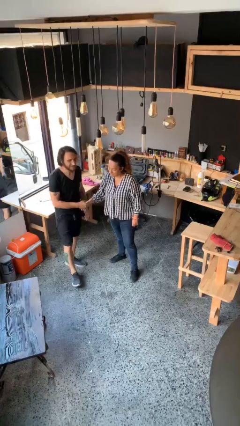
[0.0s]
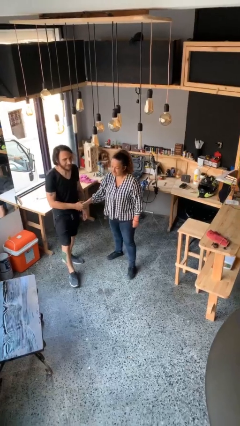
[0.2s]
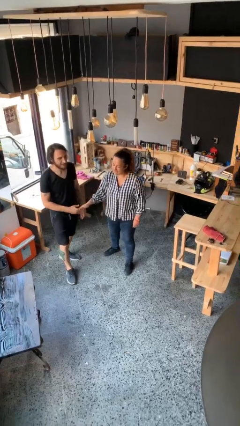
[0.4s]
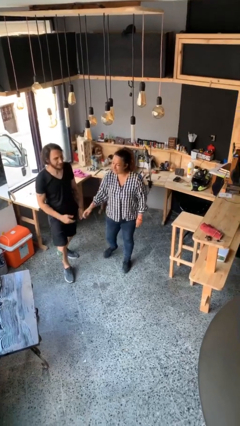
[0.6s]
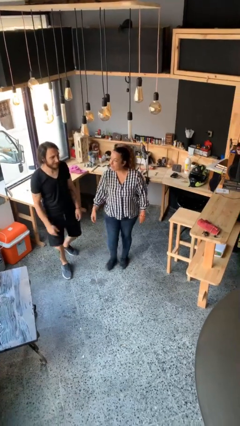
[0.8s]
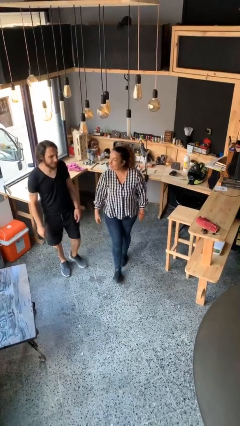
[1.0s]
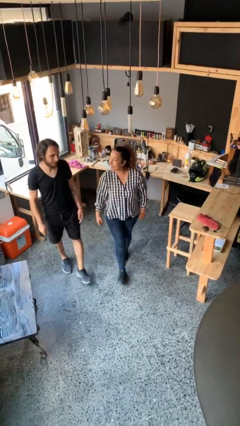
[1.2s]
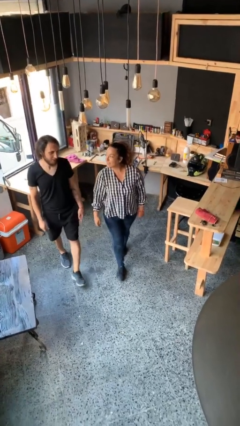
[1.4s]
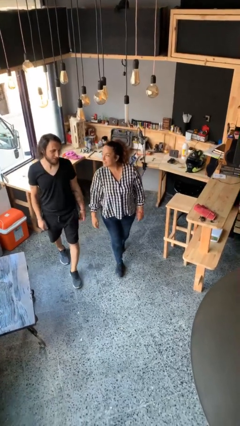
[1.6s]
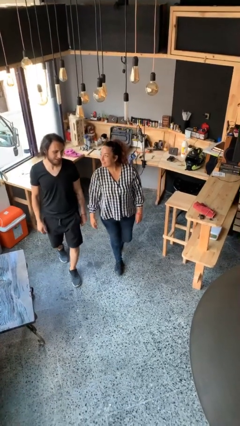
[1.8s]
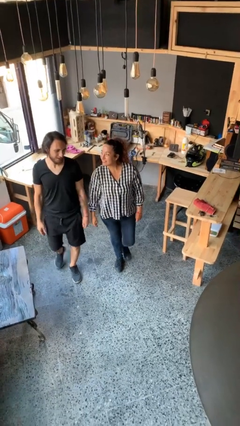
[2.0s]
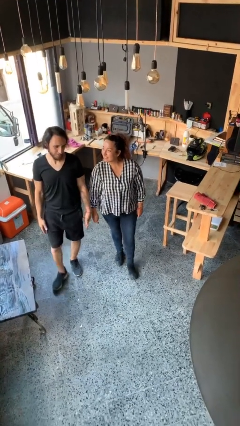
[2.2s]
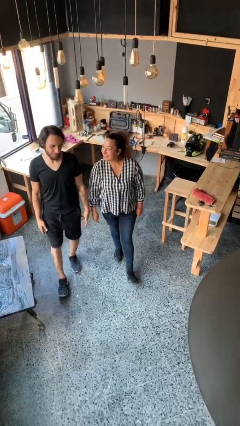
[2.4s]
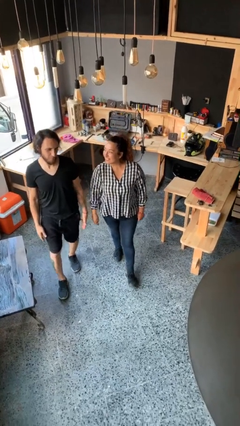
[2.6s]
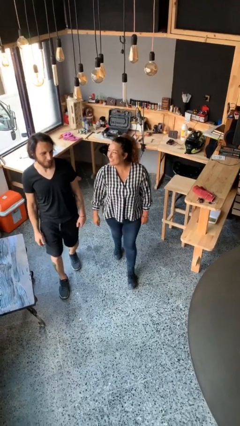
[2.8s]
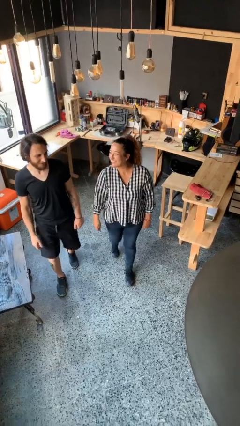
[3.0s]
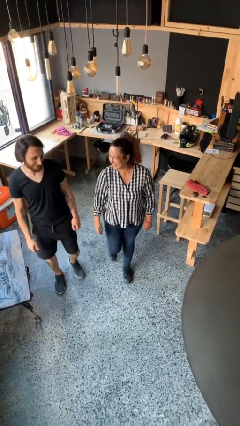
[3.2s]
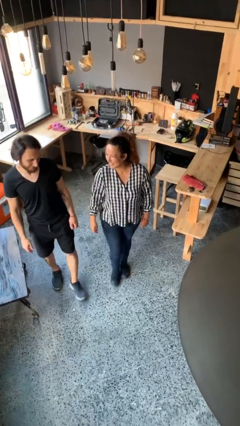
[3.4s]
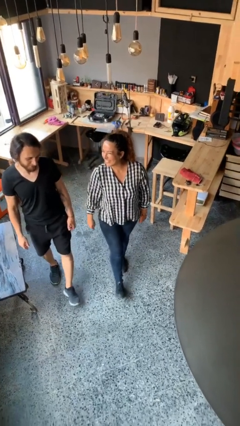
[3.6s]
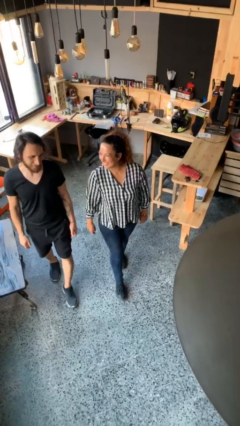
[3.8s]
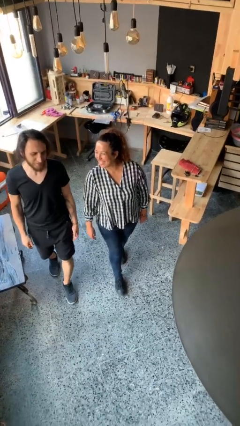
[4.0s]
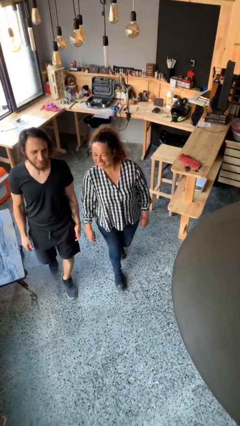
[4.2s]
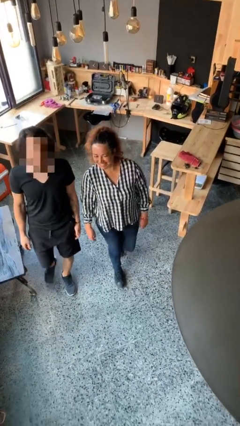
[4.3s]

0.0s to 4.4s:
person talks to person

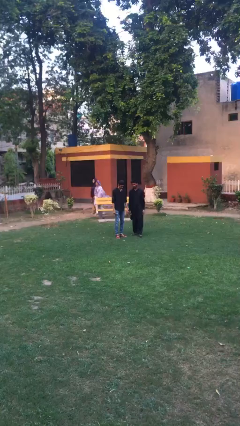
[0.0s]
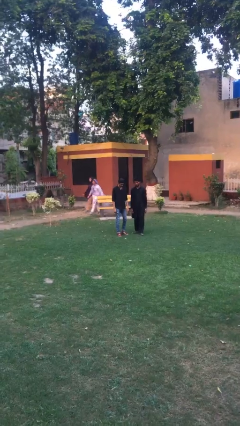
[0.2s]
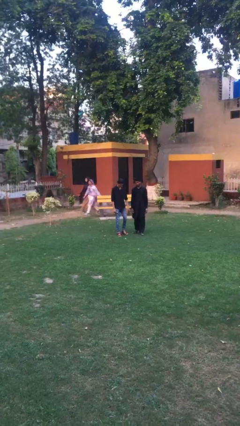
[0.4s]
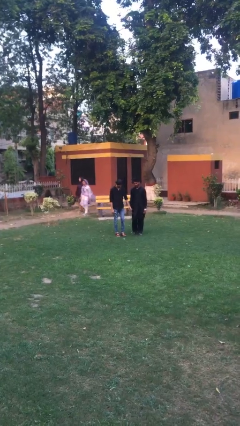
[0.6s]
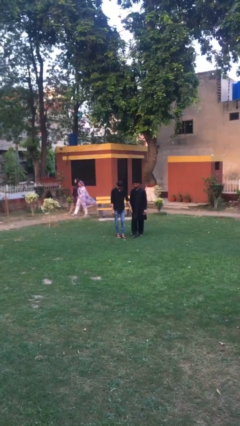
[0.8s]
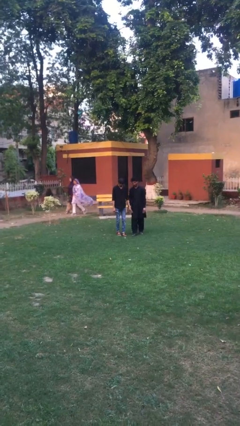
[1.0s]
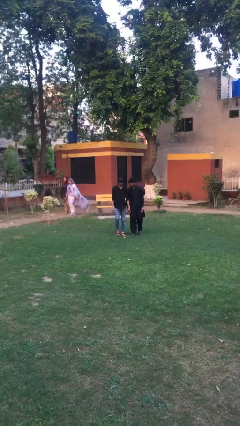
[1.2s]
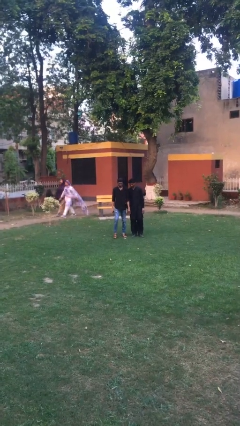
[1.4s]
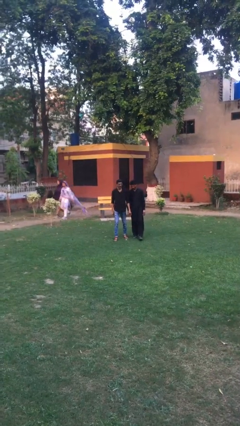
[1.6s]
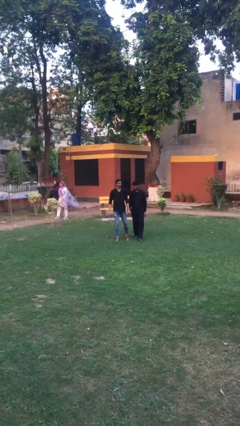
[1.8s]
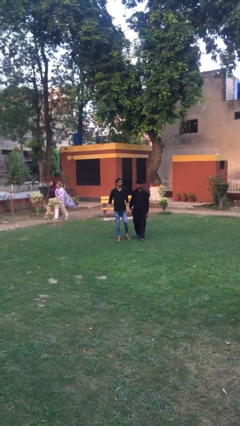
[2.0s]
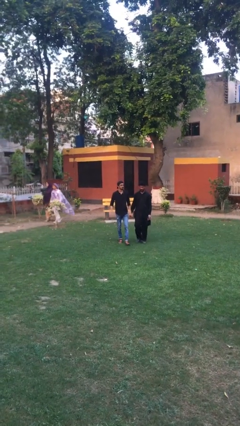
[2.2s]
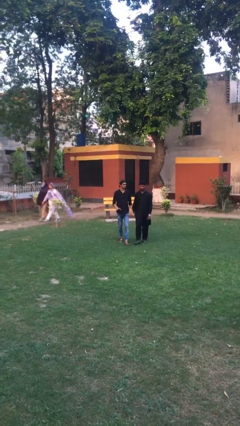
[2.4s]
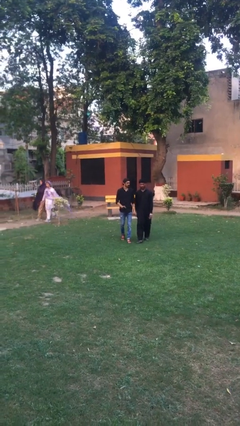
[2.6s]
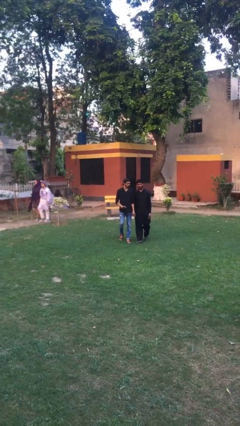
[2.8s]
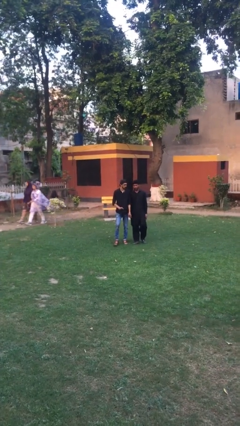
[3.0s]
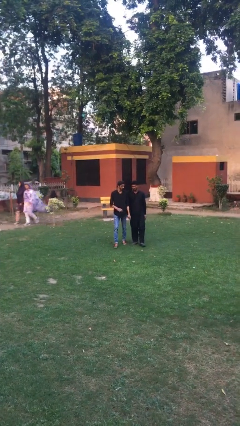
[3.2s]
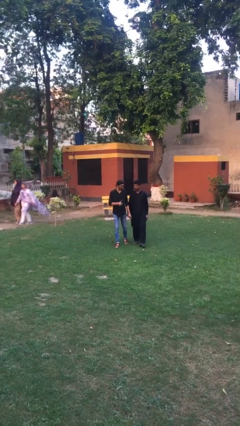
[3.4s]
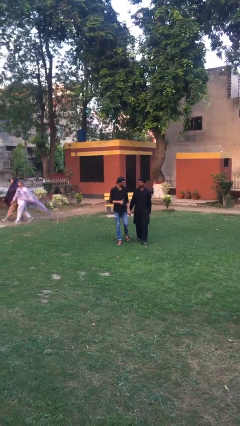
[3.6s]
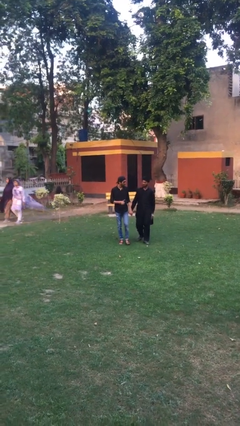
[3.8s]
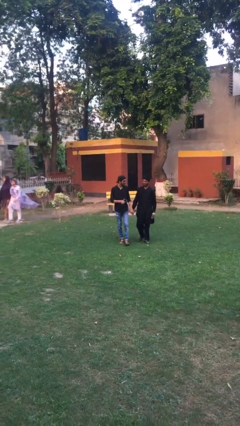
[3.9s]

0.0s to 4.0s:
person holds hand

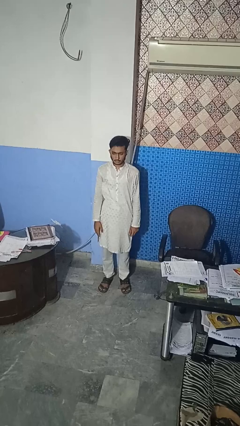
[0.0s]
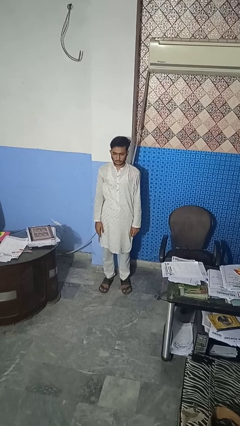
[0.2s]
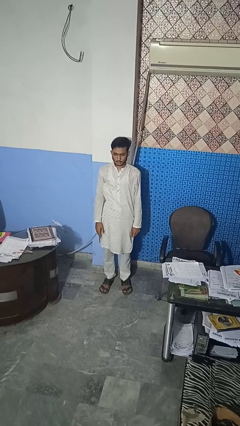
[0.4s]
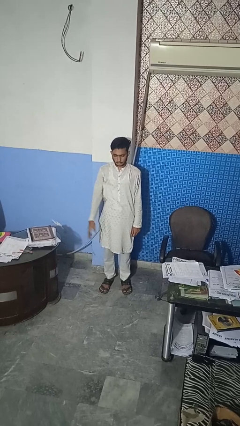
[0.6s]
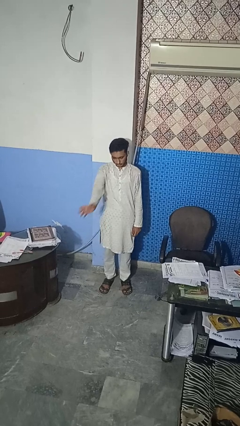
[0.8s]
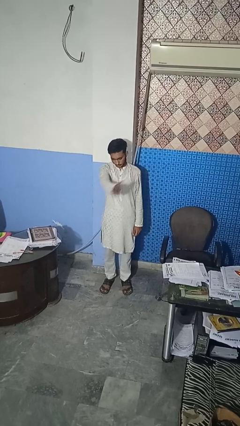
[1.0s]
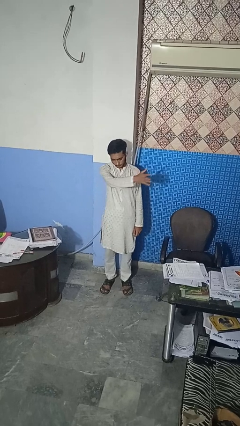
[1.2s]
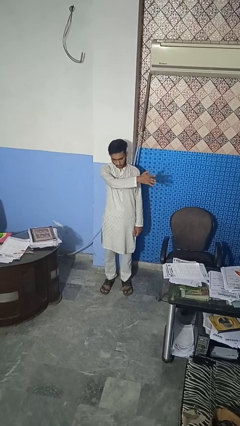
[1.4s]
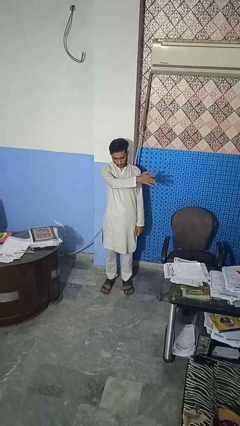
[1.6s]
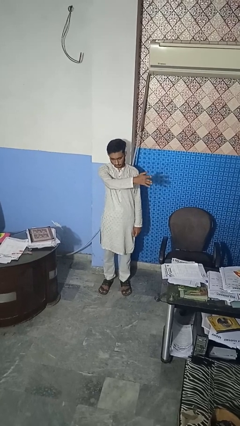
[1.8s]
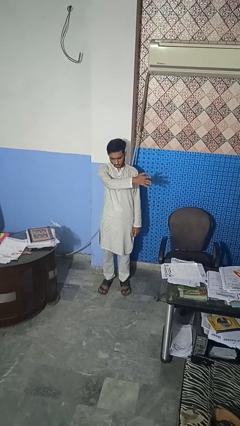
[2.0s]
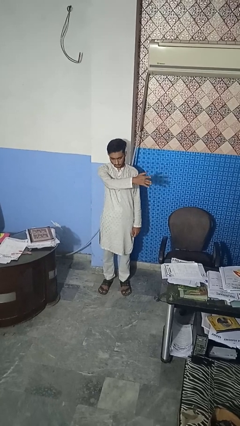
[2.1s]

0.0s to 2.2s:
person gestures swipe left

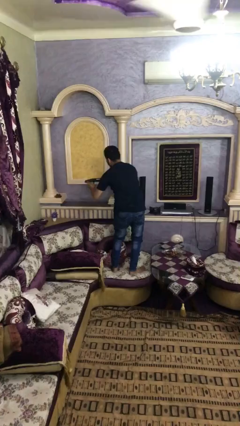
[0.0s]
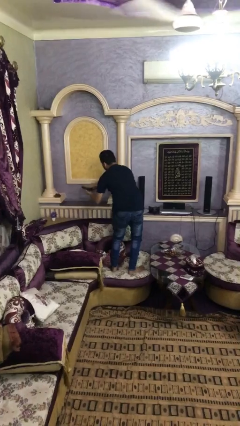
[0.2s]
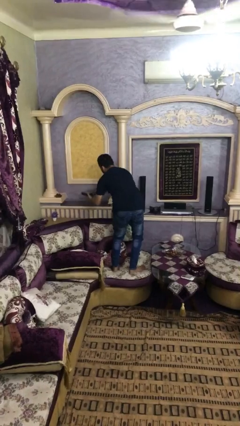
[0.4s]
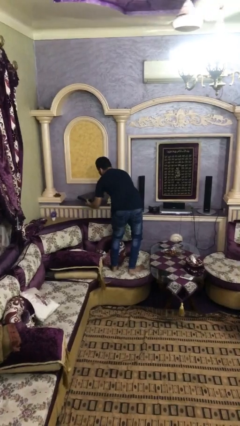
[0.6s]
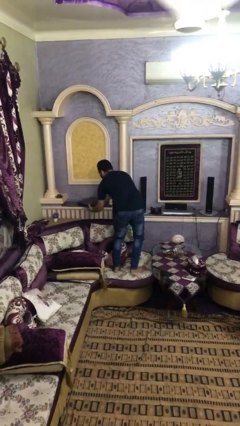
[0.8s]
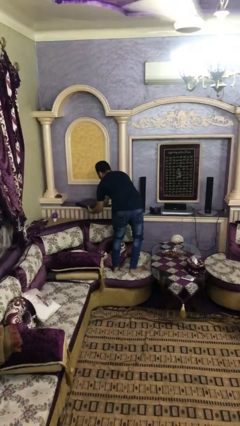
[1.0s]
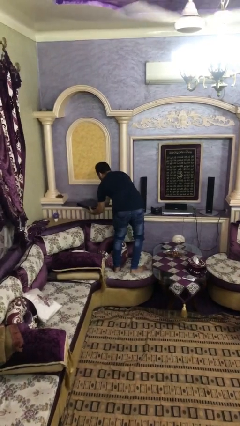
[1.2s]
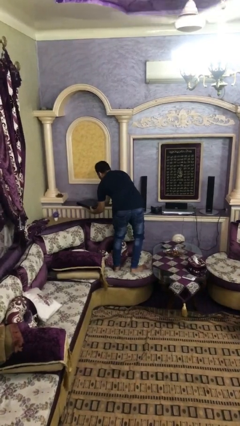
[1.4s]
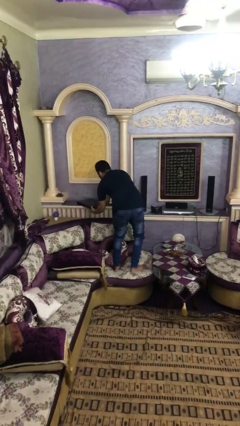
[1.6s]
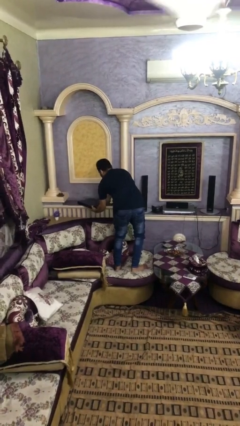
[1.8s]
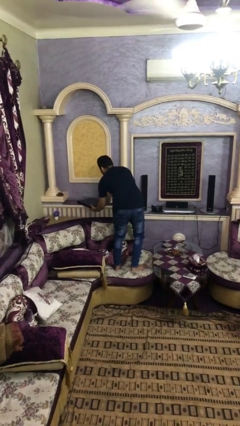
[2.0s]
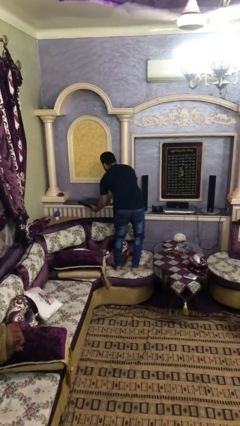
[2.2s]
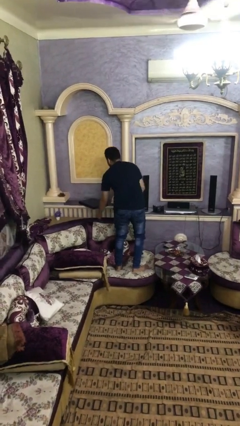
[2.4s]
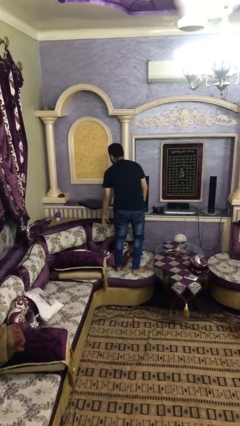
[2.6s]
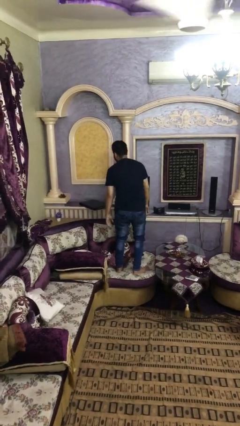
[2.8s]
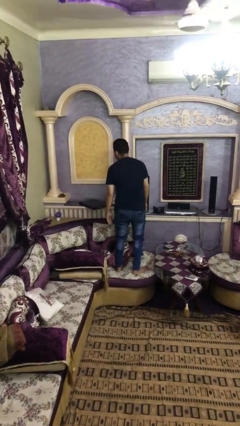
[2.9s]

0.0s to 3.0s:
person puts down object on table

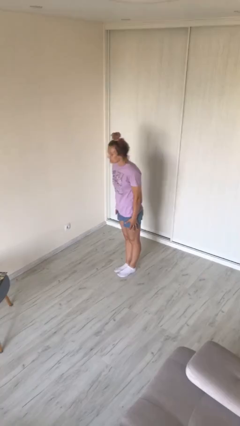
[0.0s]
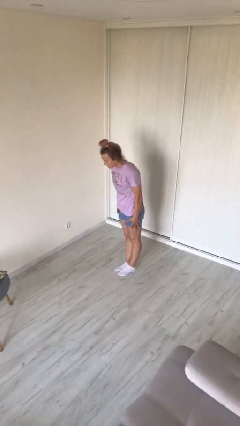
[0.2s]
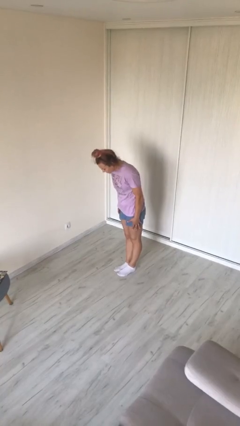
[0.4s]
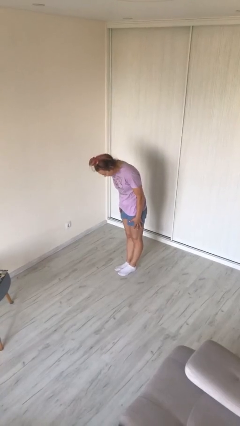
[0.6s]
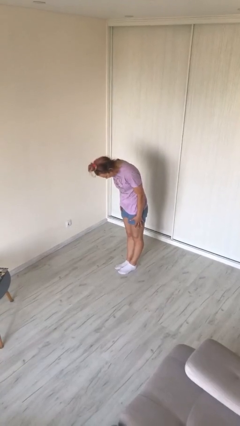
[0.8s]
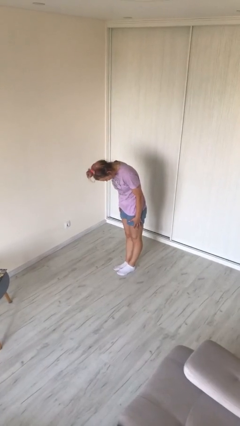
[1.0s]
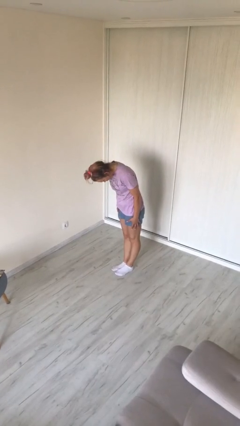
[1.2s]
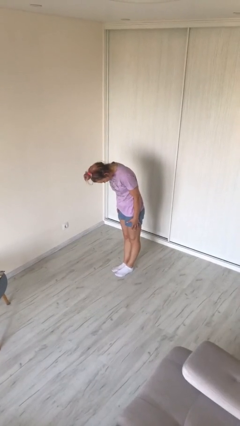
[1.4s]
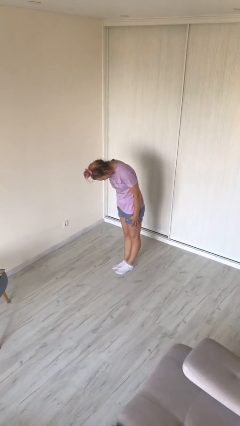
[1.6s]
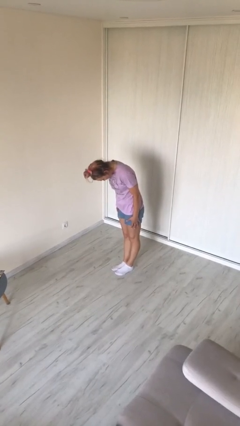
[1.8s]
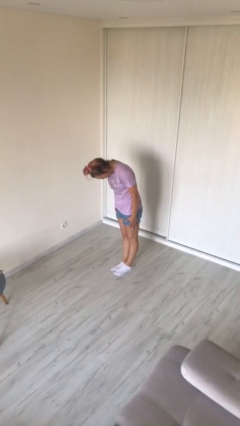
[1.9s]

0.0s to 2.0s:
person bows

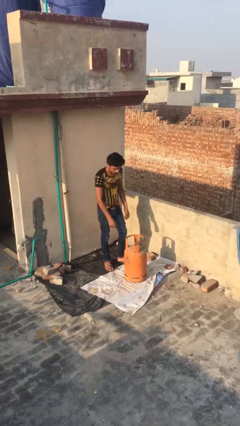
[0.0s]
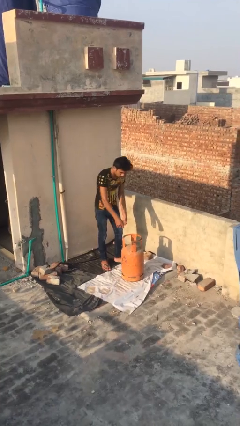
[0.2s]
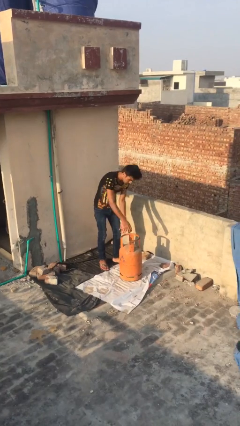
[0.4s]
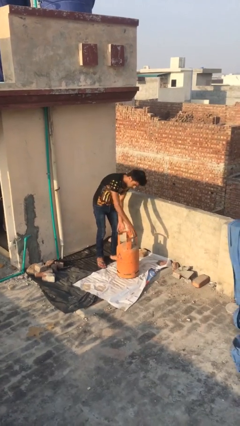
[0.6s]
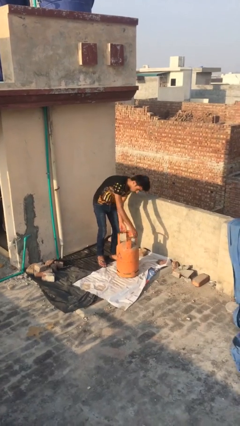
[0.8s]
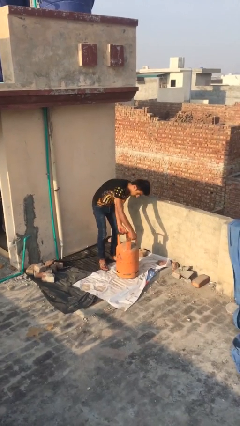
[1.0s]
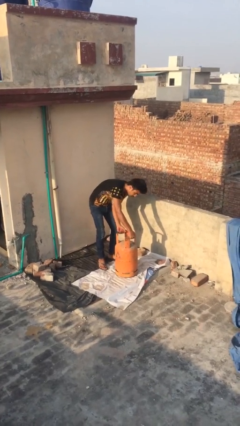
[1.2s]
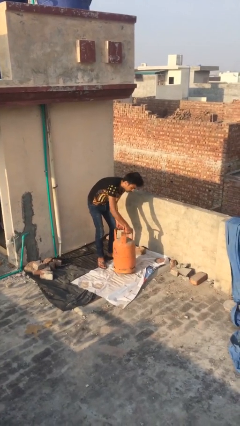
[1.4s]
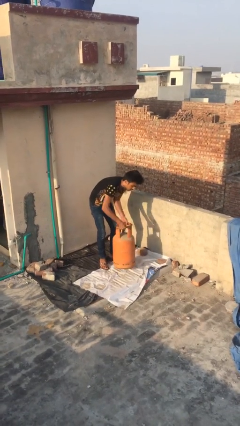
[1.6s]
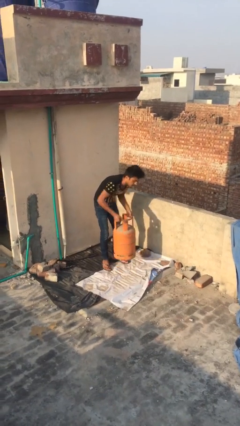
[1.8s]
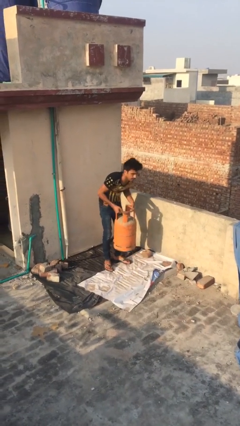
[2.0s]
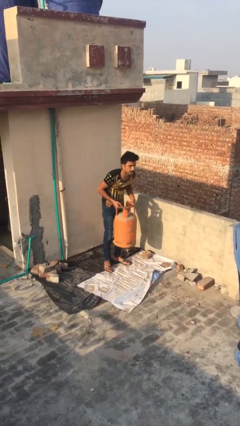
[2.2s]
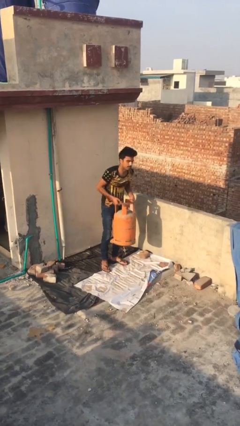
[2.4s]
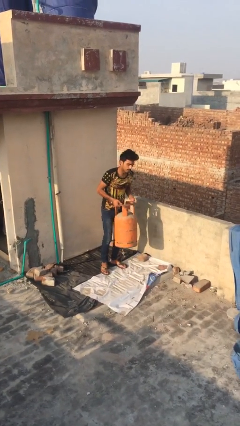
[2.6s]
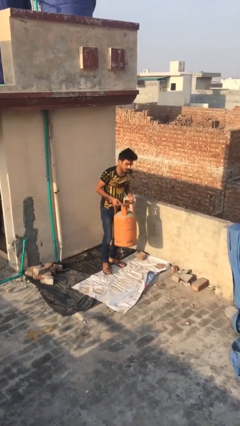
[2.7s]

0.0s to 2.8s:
person picks up object from floor
